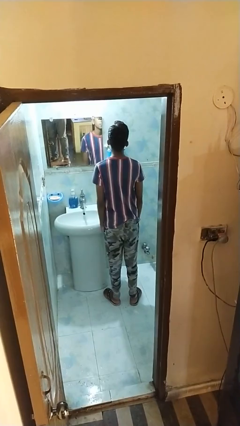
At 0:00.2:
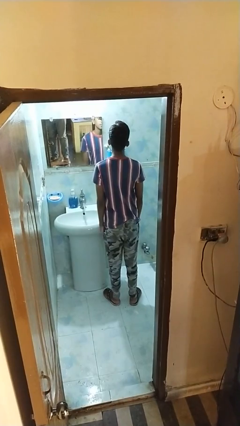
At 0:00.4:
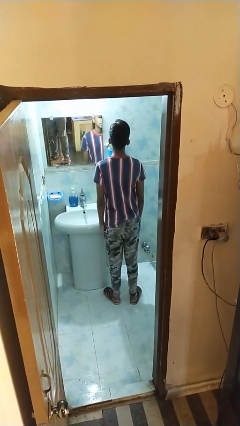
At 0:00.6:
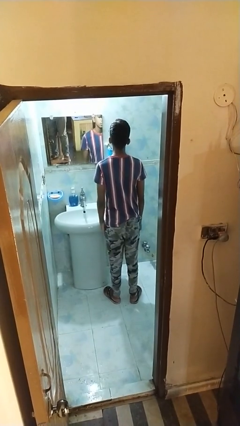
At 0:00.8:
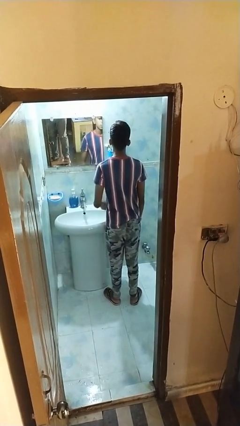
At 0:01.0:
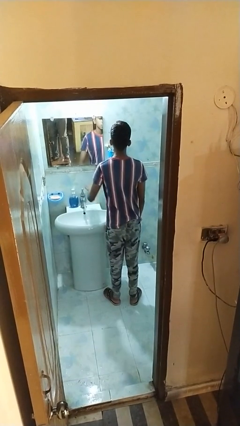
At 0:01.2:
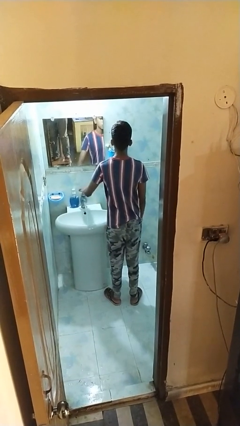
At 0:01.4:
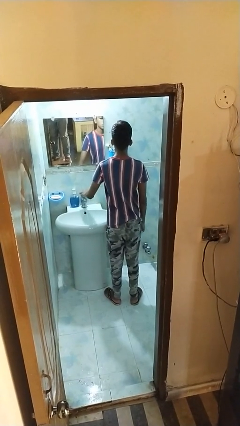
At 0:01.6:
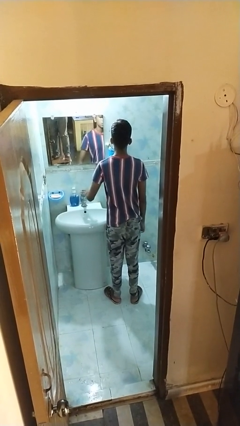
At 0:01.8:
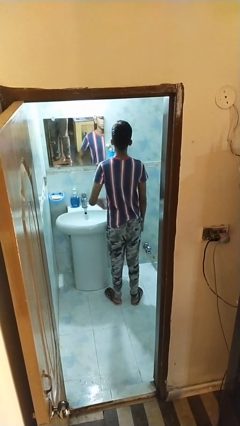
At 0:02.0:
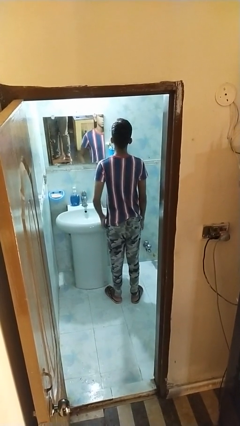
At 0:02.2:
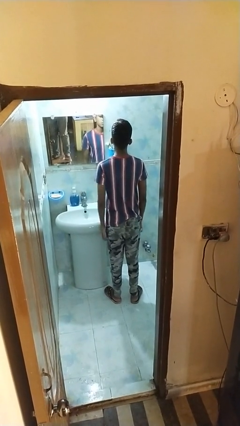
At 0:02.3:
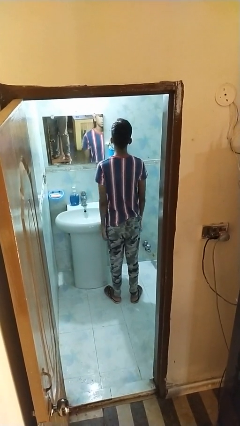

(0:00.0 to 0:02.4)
person turns off faucet

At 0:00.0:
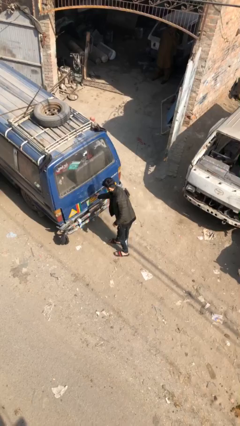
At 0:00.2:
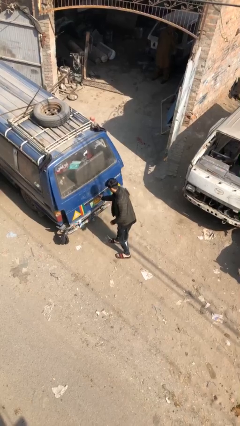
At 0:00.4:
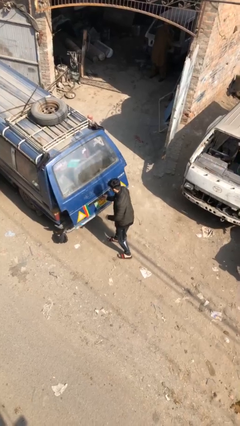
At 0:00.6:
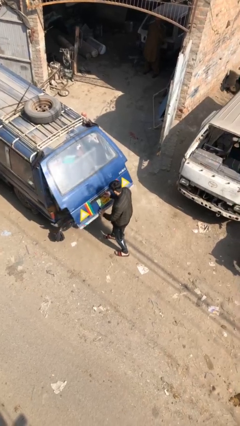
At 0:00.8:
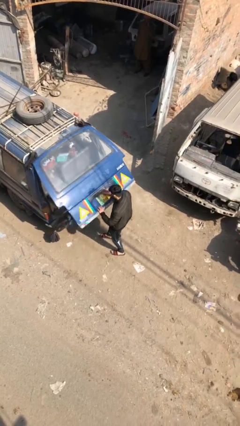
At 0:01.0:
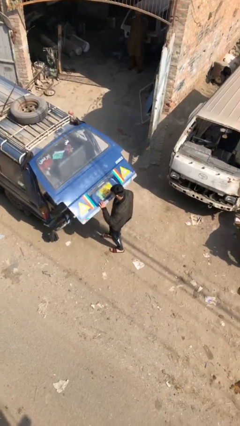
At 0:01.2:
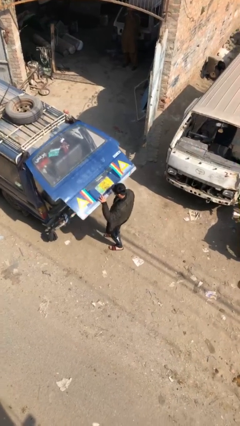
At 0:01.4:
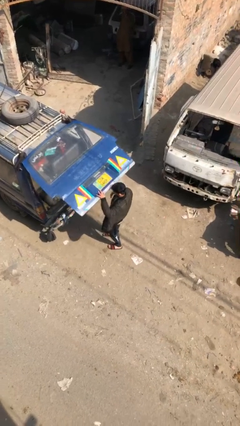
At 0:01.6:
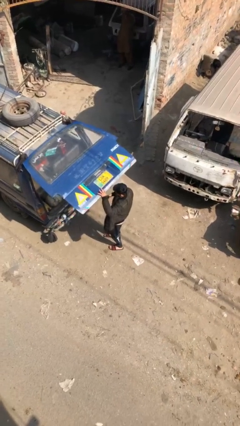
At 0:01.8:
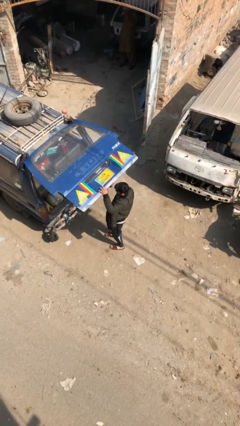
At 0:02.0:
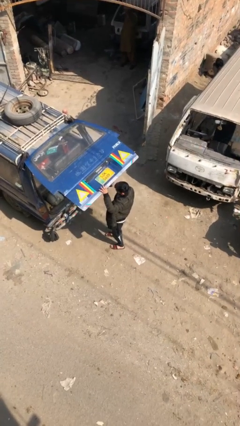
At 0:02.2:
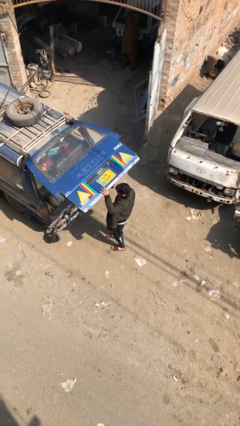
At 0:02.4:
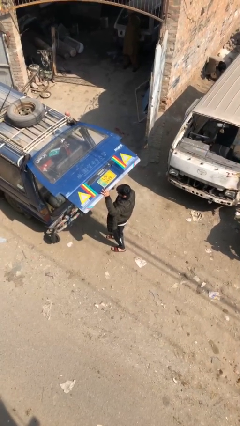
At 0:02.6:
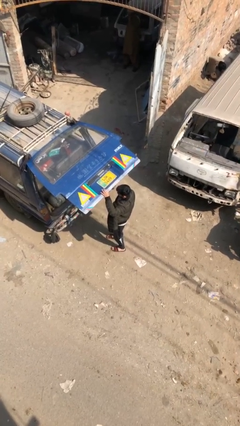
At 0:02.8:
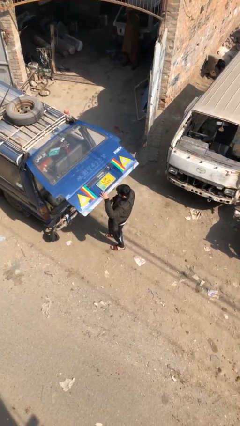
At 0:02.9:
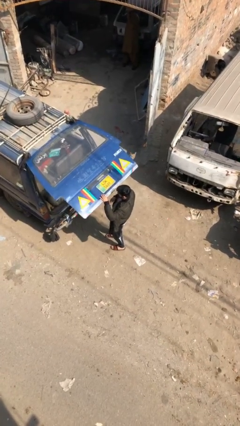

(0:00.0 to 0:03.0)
person opens car trunk

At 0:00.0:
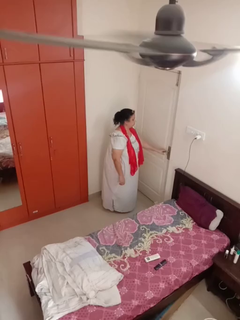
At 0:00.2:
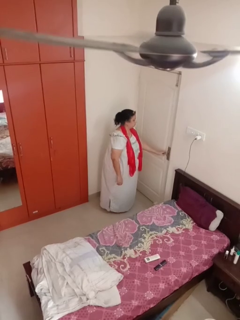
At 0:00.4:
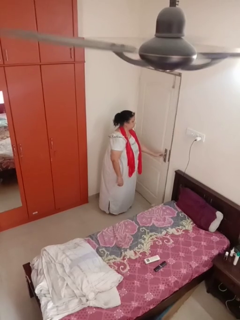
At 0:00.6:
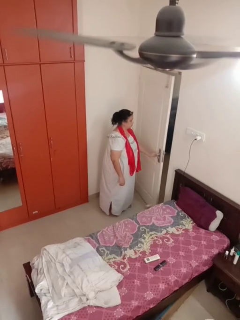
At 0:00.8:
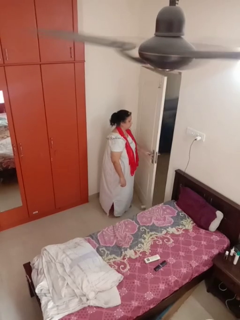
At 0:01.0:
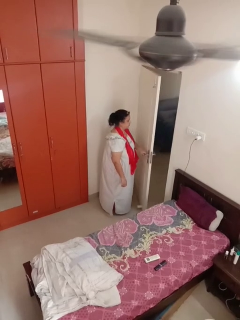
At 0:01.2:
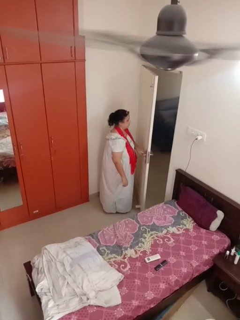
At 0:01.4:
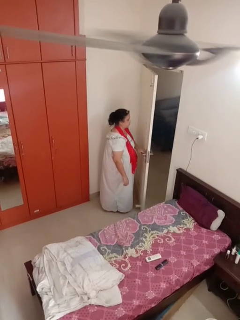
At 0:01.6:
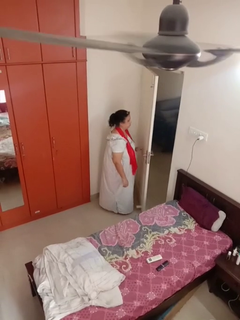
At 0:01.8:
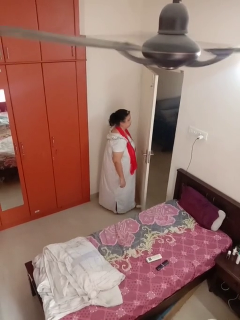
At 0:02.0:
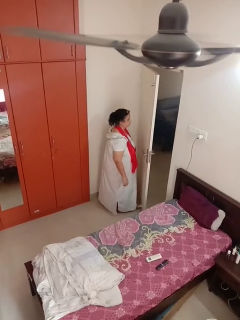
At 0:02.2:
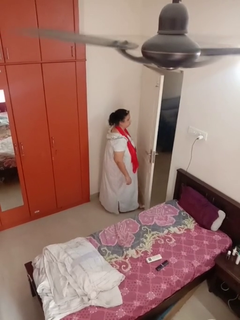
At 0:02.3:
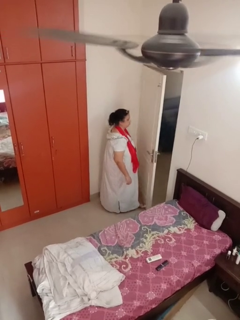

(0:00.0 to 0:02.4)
person opens facility door

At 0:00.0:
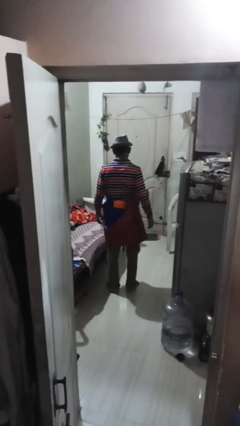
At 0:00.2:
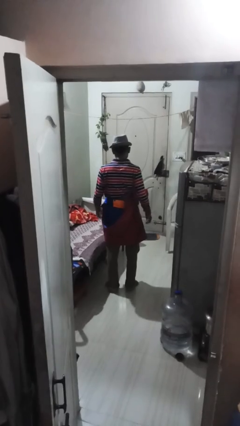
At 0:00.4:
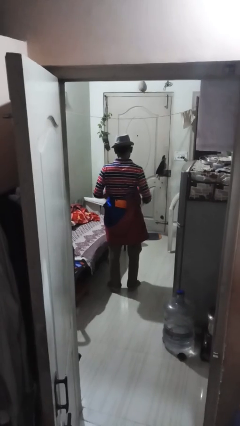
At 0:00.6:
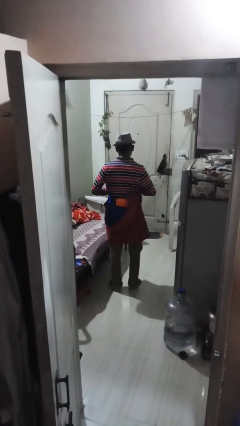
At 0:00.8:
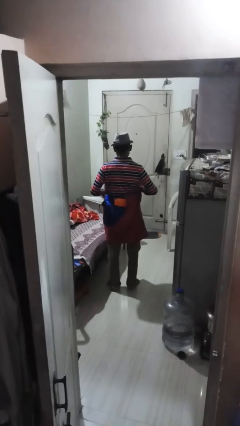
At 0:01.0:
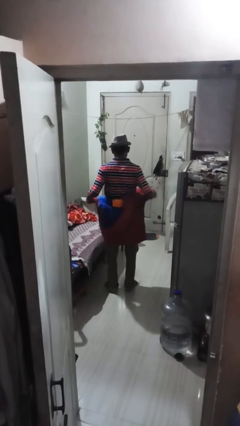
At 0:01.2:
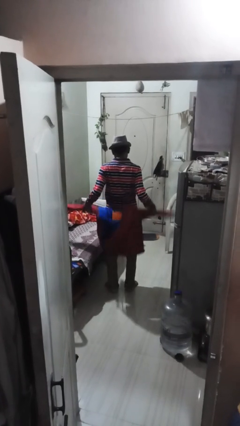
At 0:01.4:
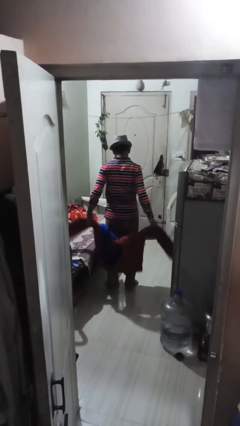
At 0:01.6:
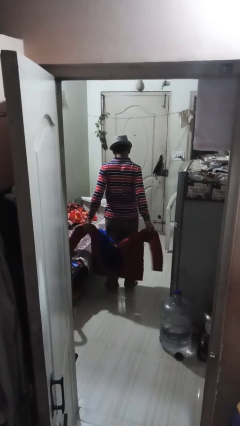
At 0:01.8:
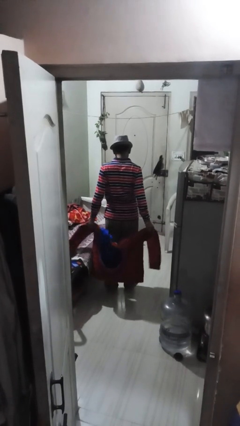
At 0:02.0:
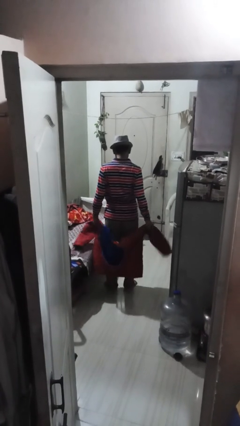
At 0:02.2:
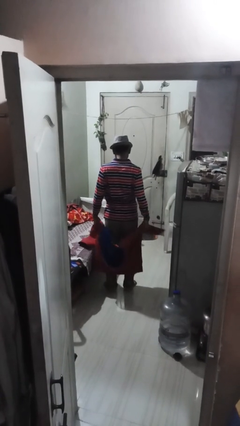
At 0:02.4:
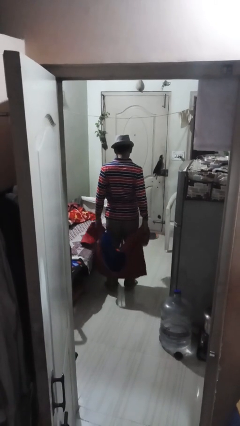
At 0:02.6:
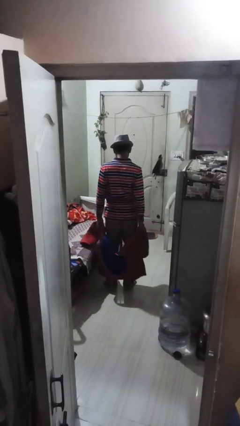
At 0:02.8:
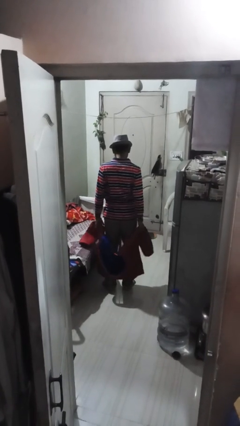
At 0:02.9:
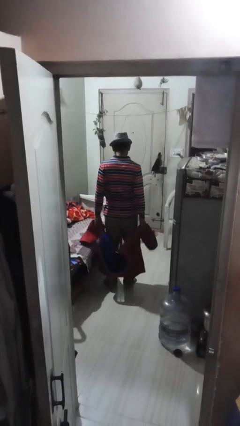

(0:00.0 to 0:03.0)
person unties jacket around waist

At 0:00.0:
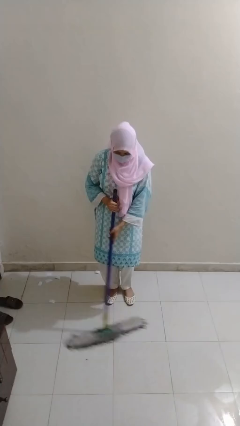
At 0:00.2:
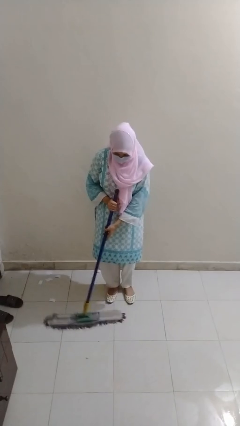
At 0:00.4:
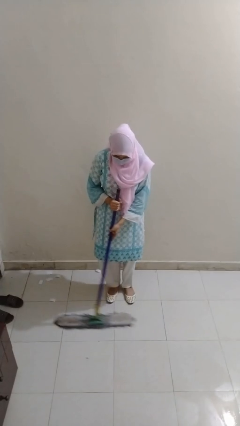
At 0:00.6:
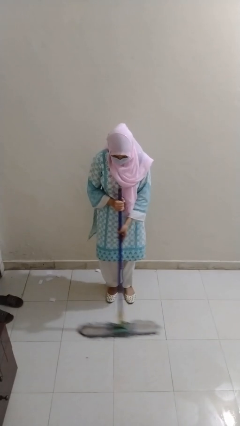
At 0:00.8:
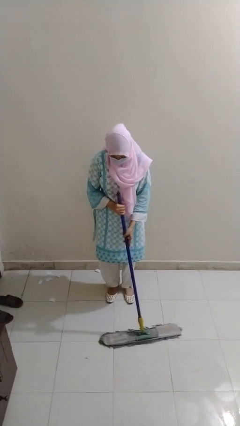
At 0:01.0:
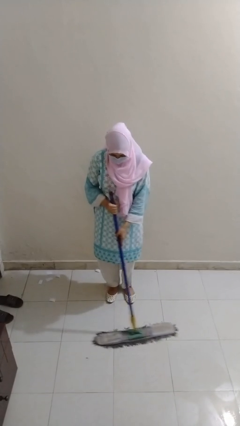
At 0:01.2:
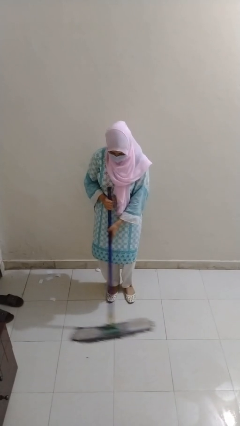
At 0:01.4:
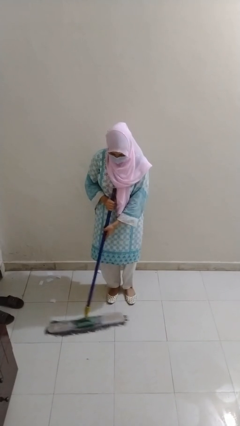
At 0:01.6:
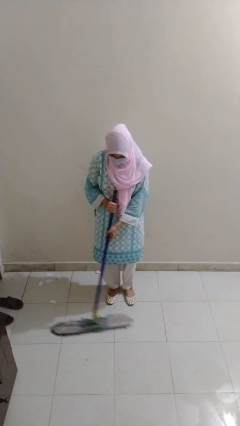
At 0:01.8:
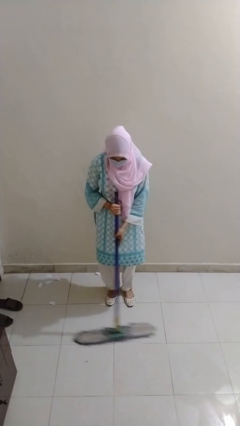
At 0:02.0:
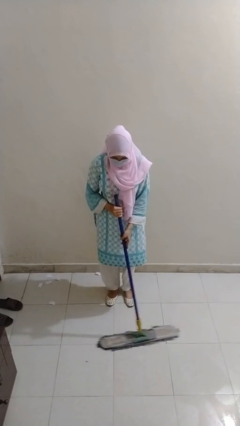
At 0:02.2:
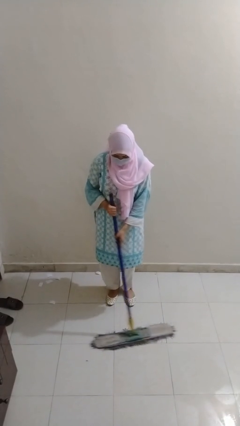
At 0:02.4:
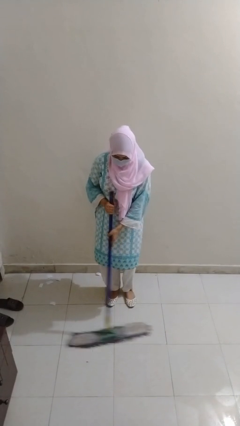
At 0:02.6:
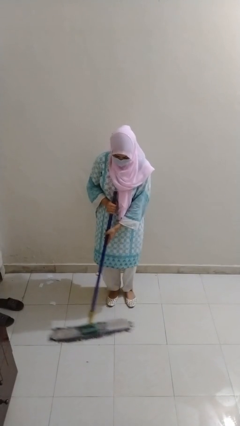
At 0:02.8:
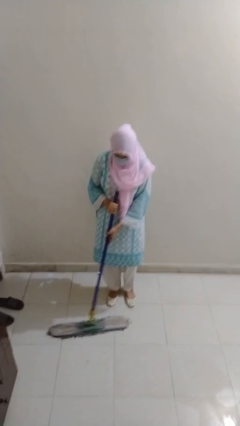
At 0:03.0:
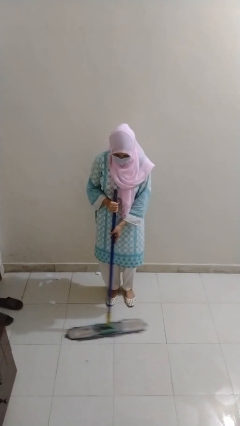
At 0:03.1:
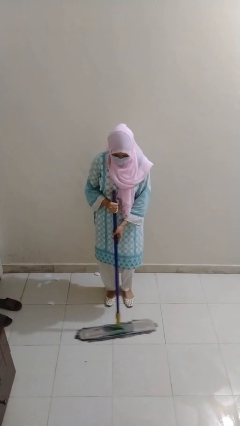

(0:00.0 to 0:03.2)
person mops

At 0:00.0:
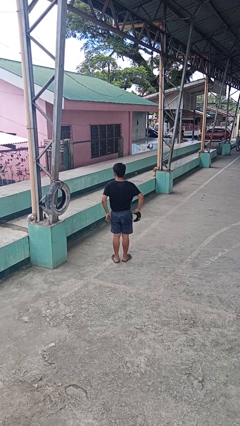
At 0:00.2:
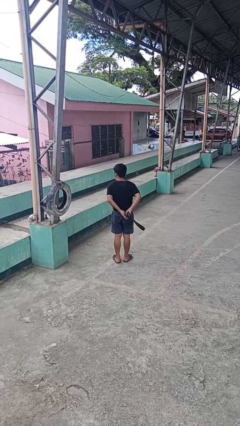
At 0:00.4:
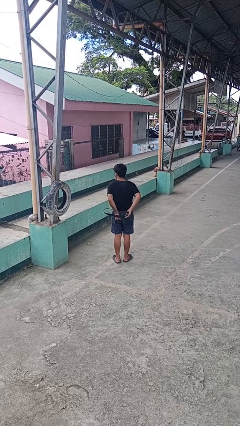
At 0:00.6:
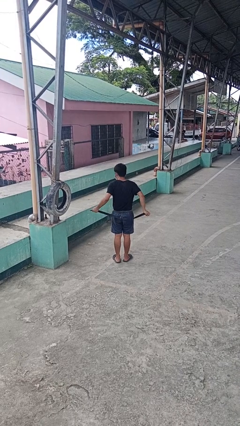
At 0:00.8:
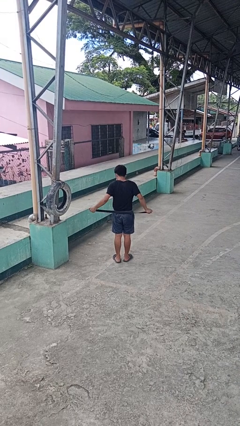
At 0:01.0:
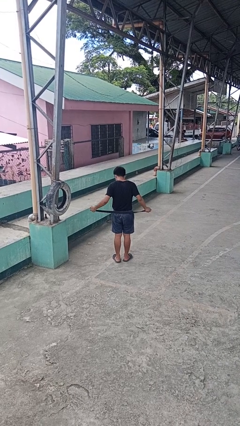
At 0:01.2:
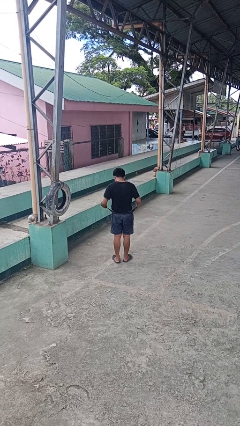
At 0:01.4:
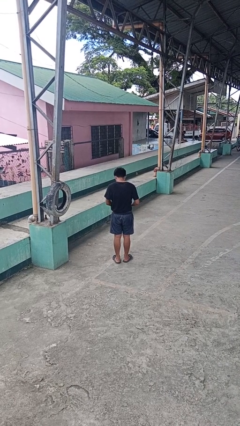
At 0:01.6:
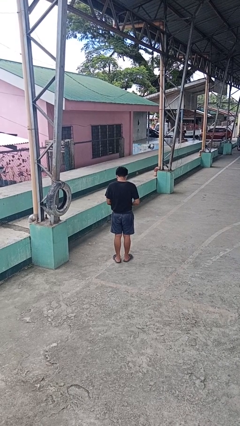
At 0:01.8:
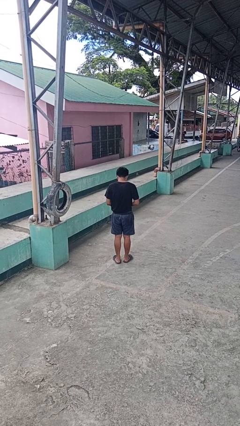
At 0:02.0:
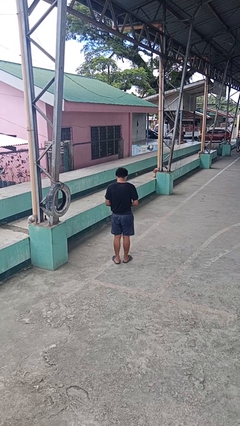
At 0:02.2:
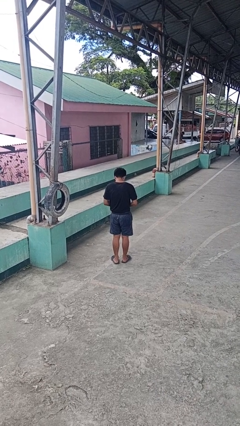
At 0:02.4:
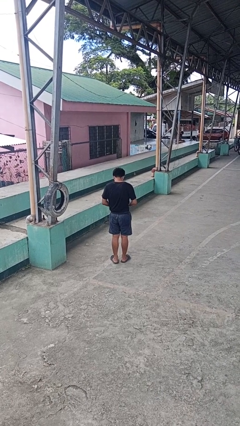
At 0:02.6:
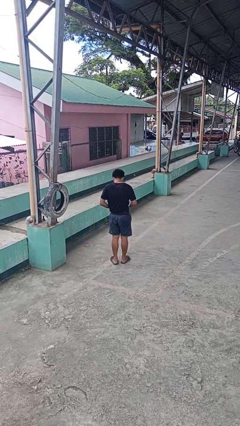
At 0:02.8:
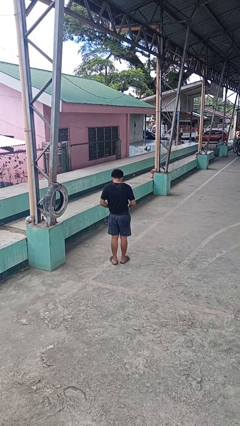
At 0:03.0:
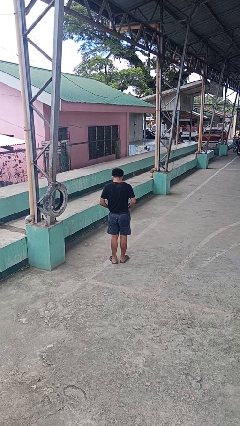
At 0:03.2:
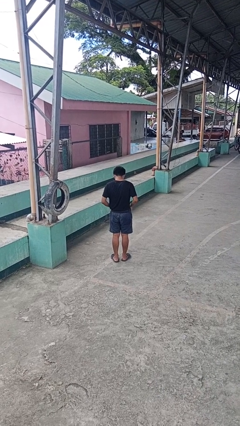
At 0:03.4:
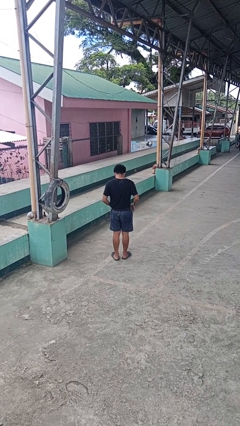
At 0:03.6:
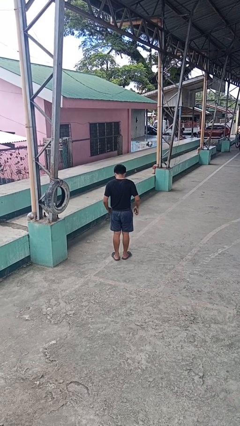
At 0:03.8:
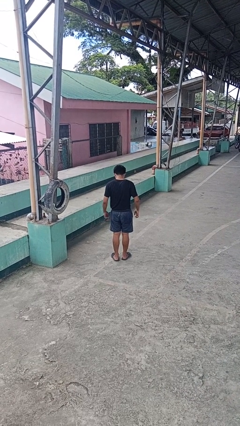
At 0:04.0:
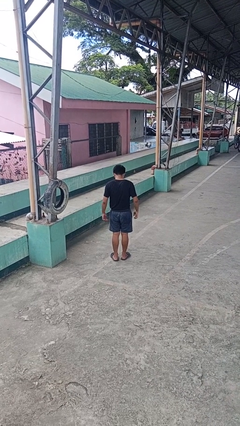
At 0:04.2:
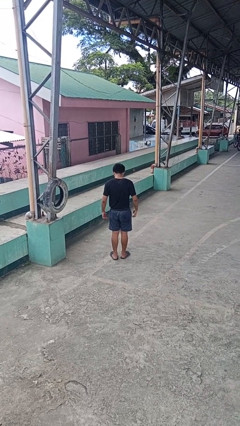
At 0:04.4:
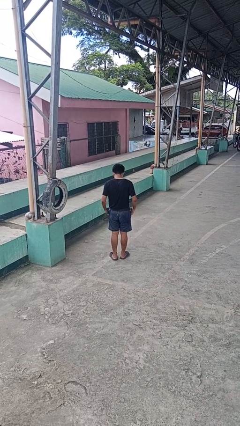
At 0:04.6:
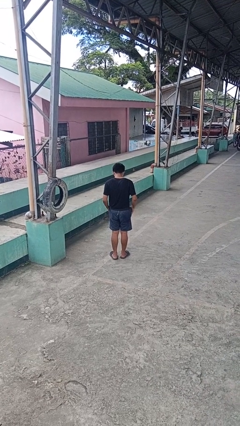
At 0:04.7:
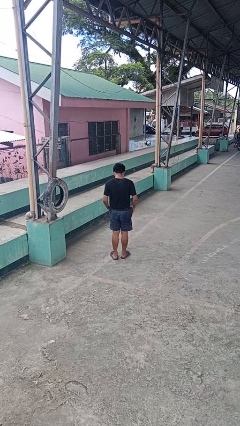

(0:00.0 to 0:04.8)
person puts on belt
